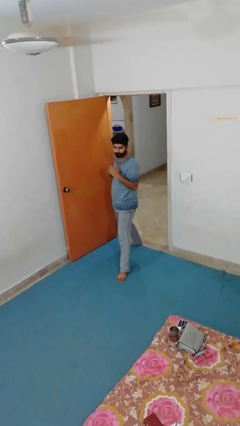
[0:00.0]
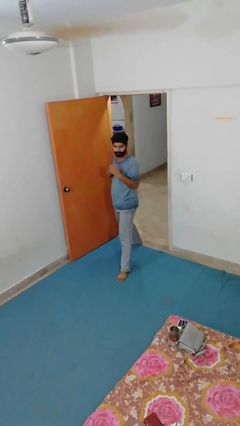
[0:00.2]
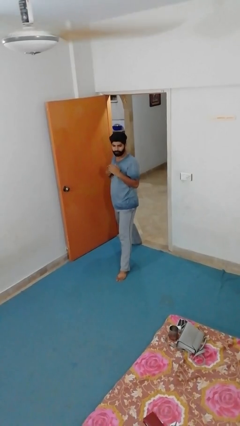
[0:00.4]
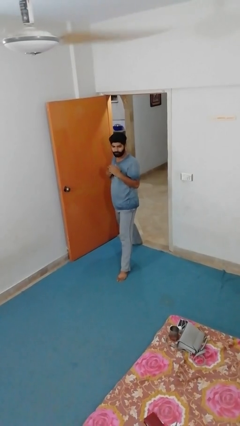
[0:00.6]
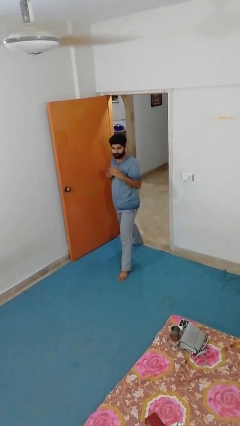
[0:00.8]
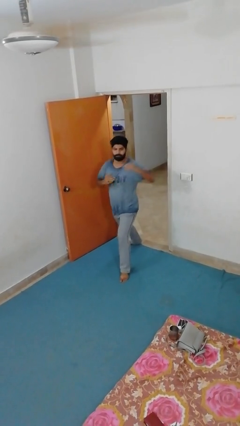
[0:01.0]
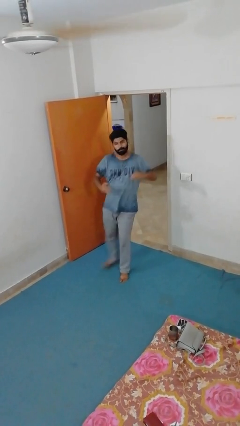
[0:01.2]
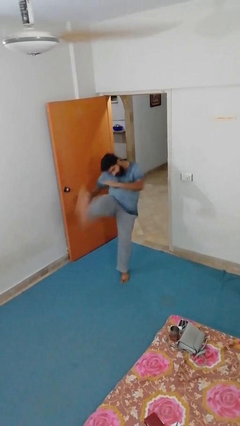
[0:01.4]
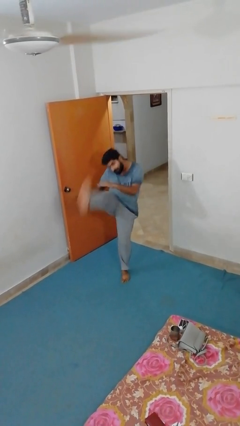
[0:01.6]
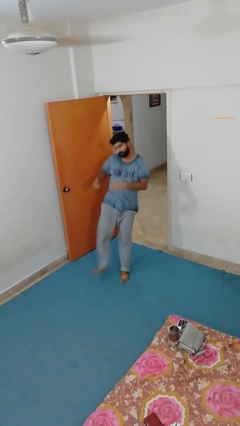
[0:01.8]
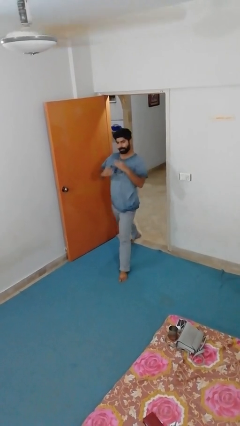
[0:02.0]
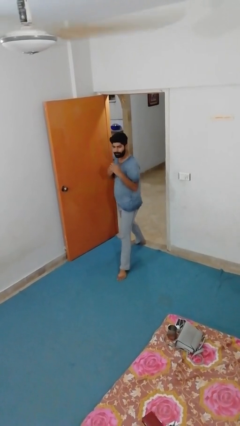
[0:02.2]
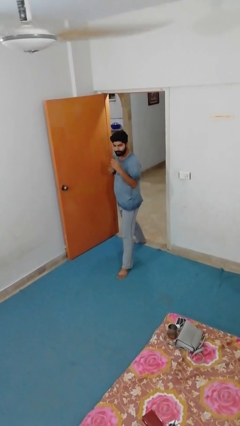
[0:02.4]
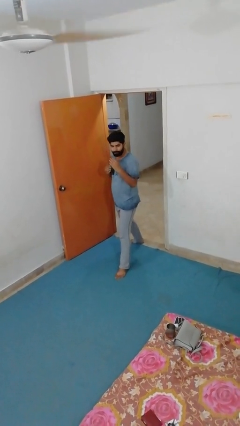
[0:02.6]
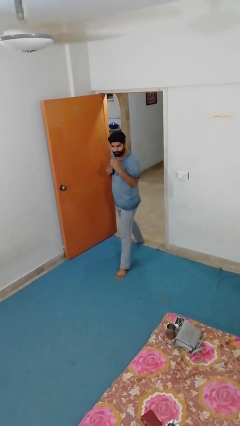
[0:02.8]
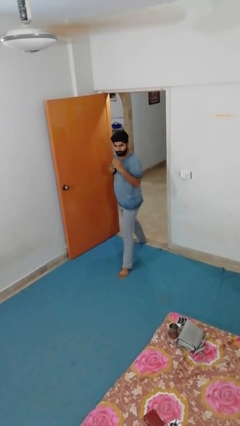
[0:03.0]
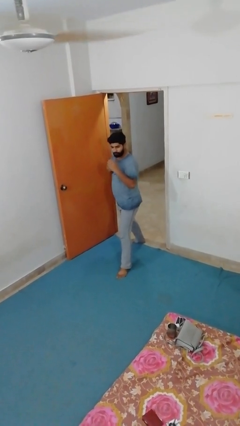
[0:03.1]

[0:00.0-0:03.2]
person karate kicks

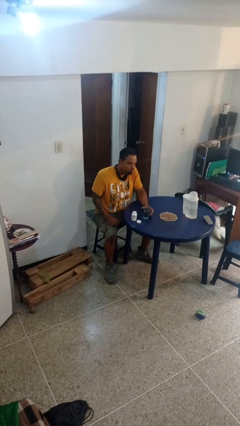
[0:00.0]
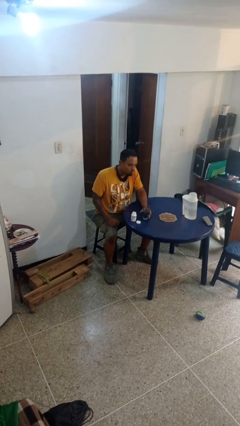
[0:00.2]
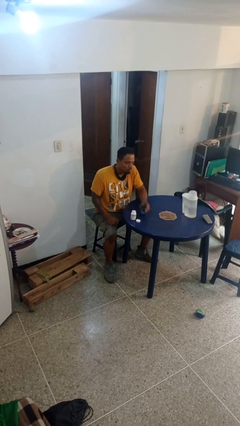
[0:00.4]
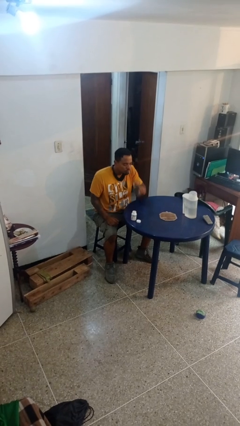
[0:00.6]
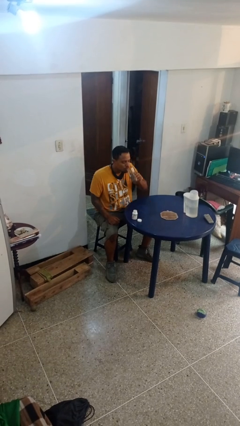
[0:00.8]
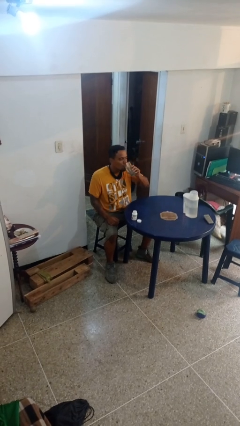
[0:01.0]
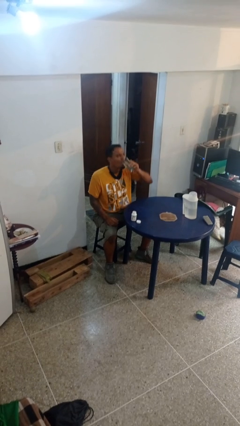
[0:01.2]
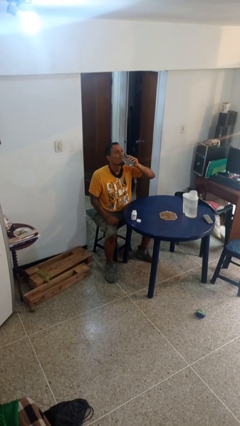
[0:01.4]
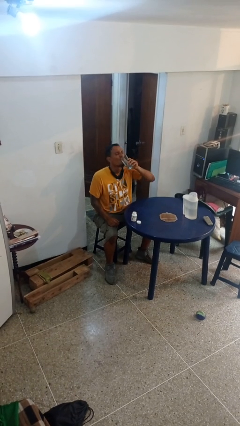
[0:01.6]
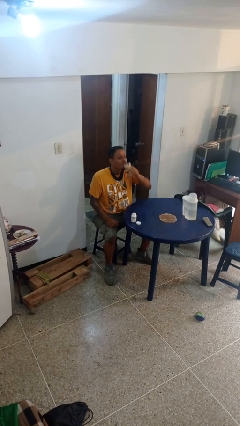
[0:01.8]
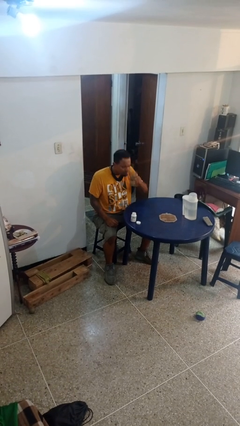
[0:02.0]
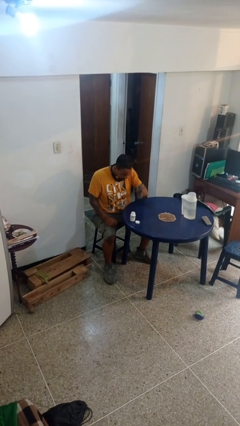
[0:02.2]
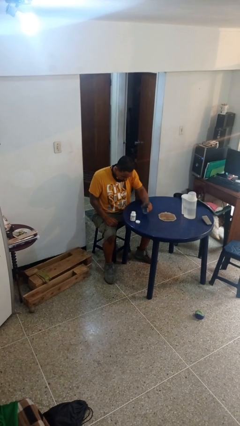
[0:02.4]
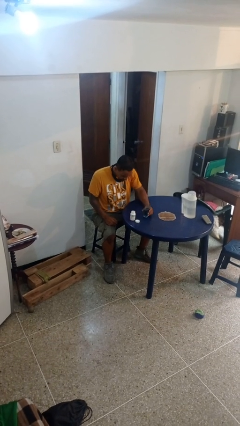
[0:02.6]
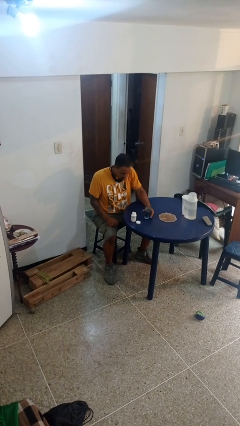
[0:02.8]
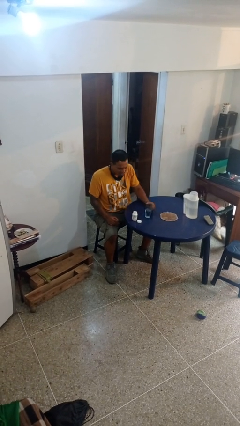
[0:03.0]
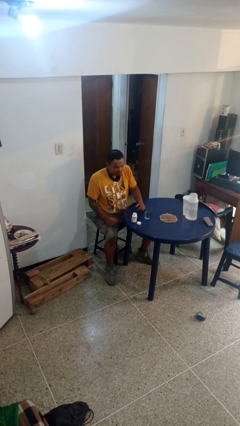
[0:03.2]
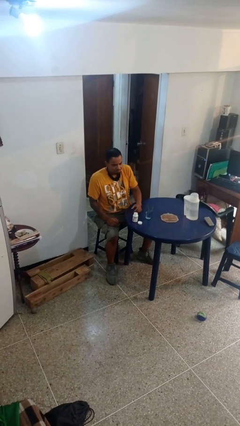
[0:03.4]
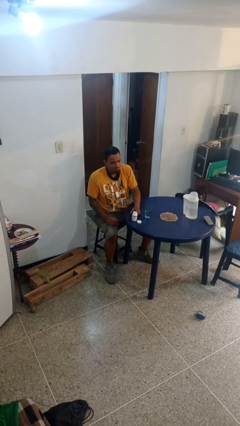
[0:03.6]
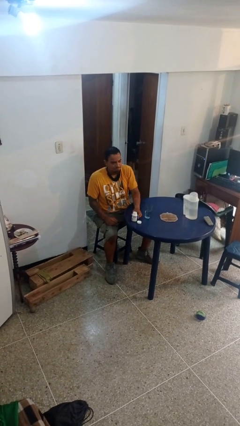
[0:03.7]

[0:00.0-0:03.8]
person drinks from cup

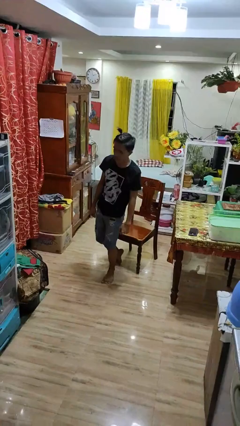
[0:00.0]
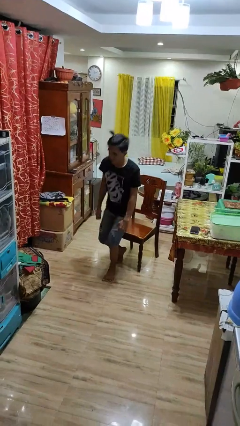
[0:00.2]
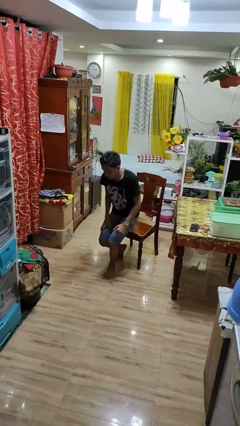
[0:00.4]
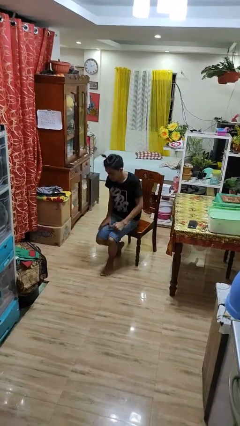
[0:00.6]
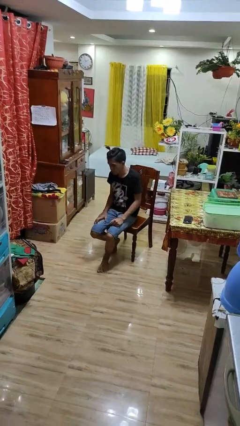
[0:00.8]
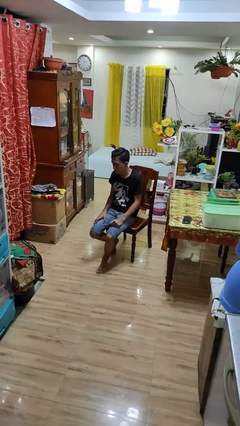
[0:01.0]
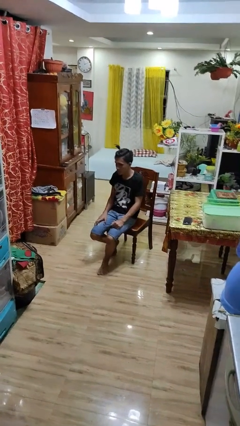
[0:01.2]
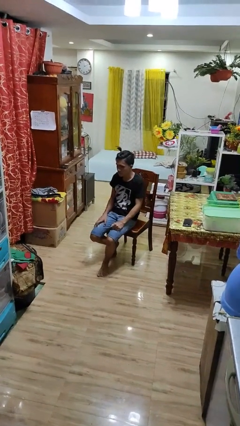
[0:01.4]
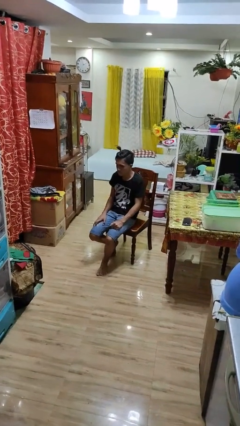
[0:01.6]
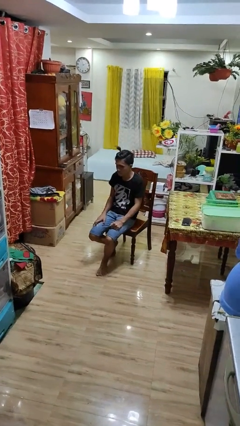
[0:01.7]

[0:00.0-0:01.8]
person sits down

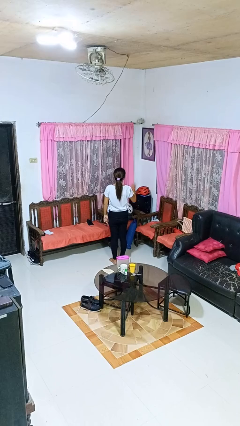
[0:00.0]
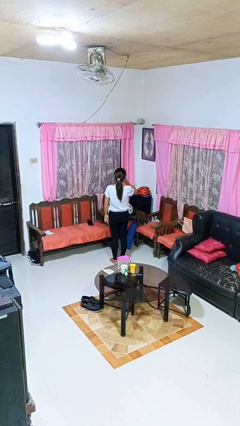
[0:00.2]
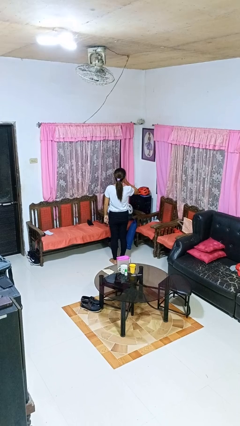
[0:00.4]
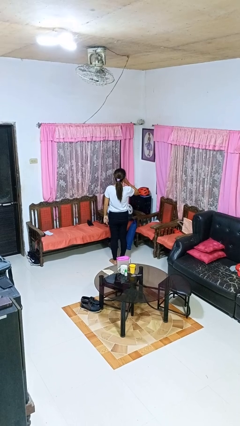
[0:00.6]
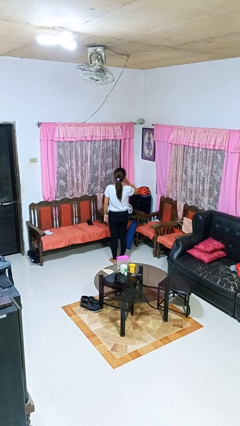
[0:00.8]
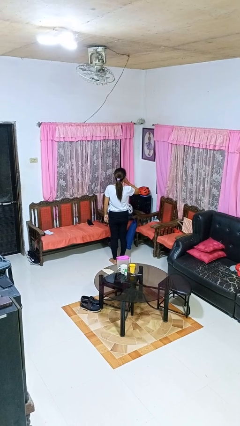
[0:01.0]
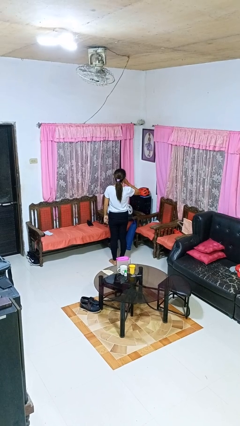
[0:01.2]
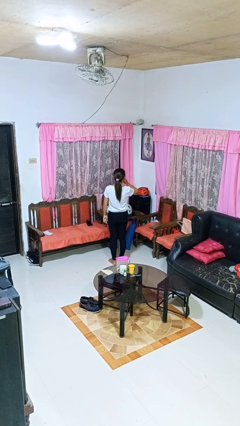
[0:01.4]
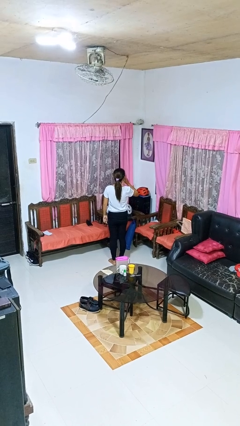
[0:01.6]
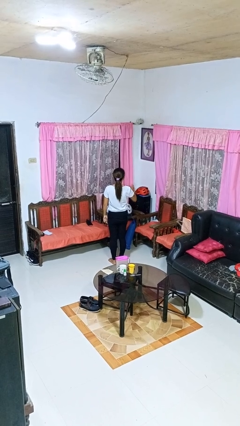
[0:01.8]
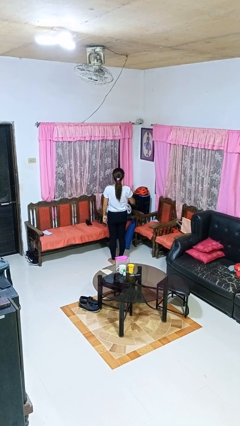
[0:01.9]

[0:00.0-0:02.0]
person gestures be quiet

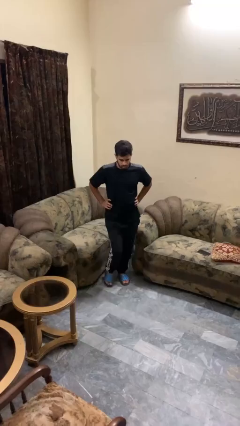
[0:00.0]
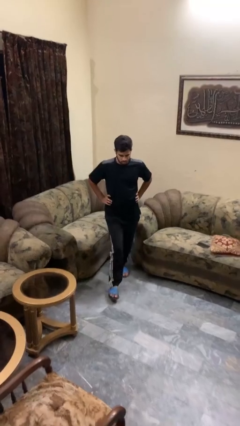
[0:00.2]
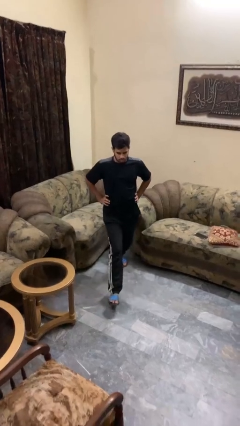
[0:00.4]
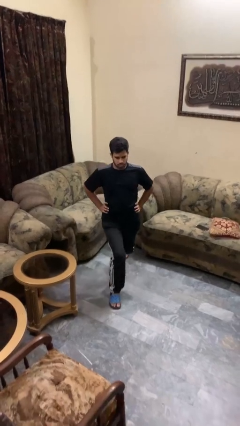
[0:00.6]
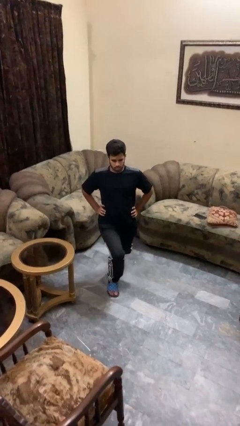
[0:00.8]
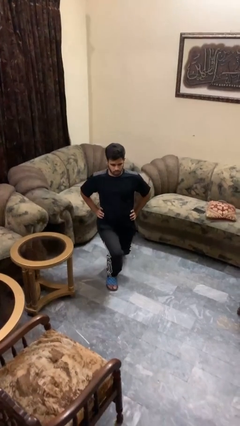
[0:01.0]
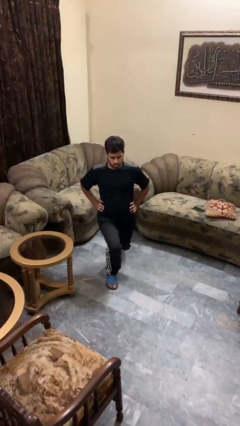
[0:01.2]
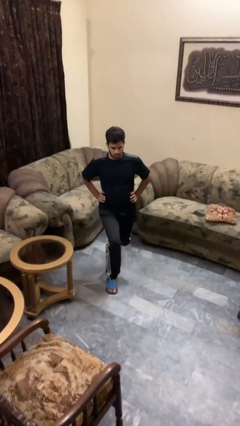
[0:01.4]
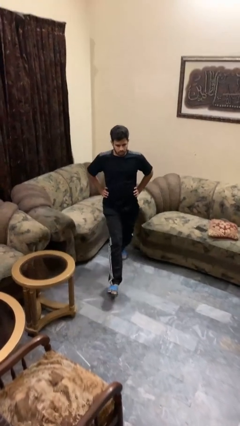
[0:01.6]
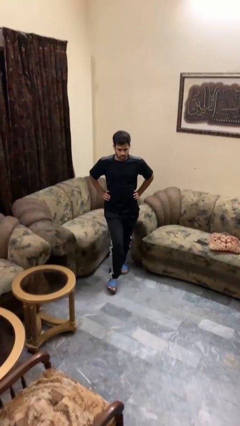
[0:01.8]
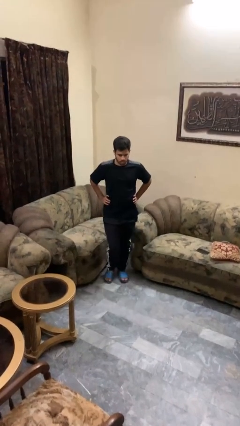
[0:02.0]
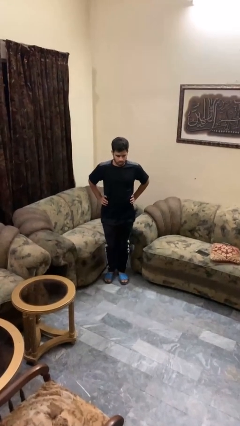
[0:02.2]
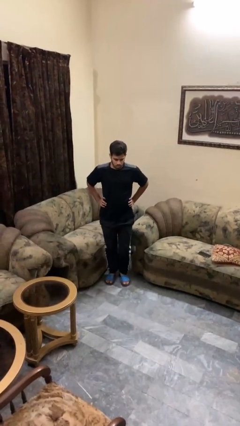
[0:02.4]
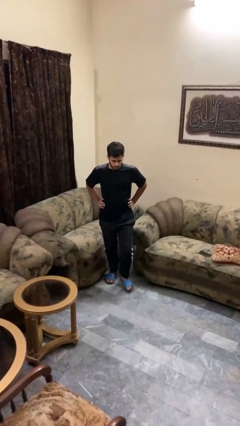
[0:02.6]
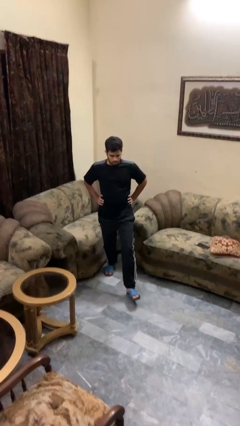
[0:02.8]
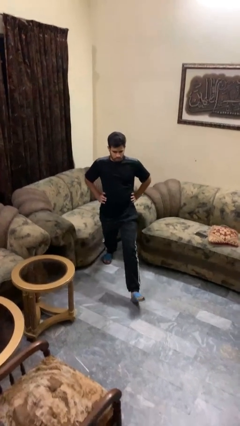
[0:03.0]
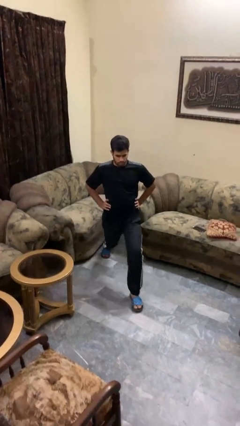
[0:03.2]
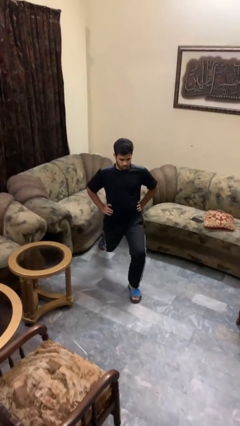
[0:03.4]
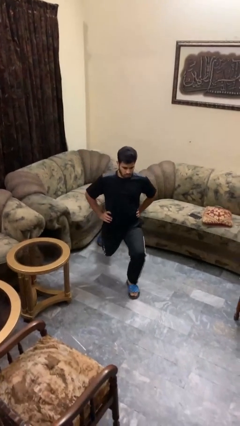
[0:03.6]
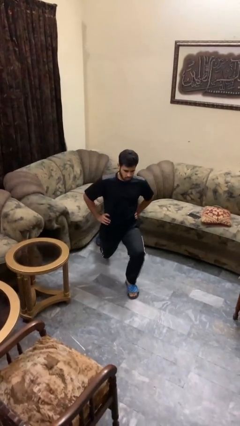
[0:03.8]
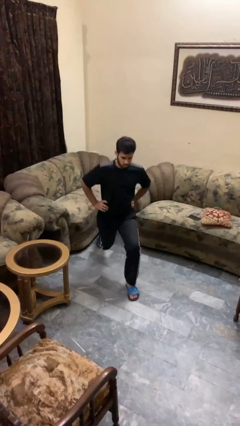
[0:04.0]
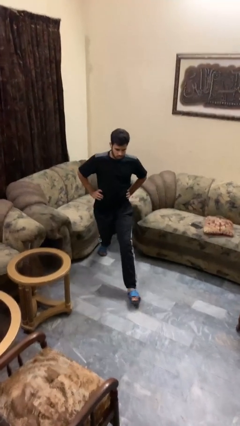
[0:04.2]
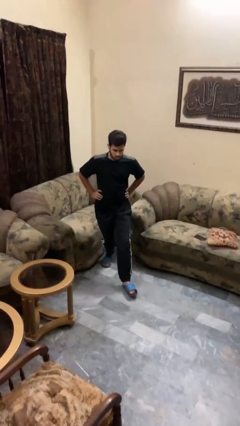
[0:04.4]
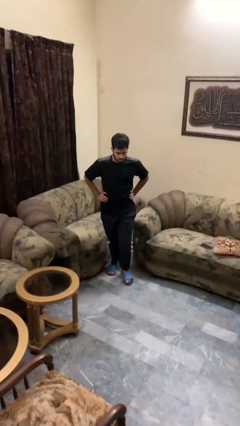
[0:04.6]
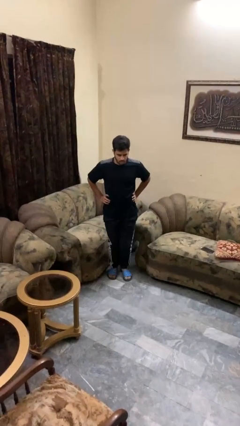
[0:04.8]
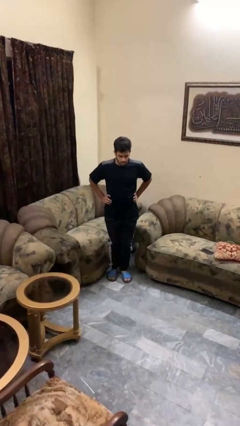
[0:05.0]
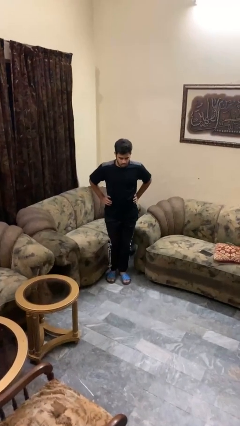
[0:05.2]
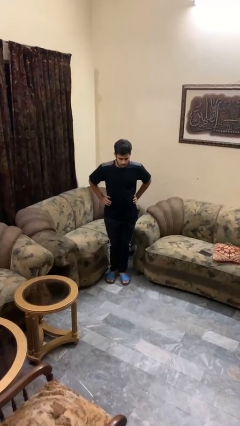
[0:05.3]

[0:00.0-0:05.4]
person exercises with lunges

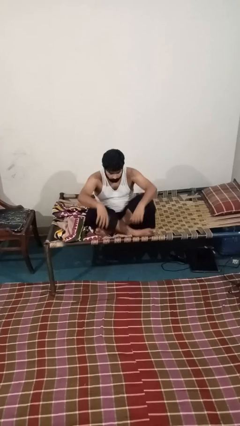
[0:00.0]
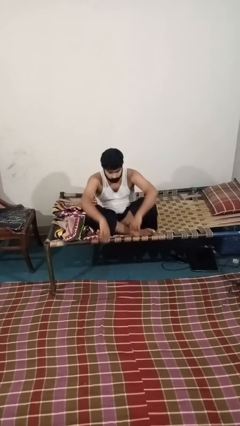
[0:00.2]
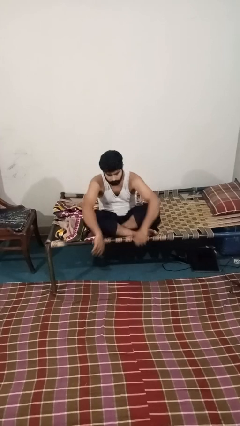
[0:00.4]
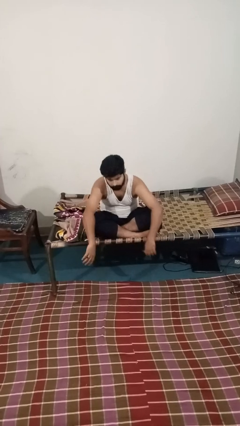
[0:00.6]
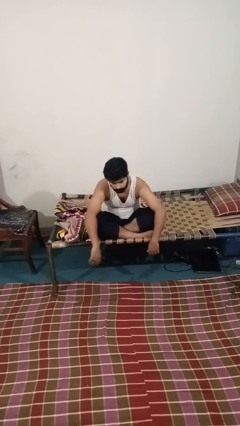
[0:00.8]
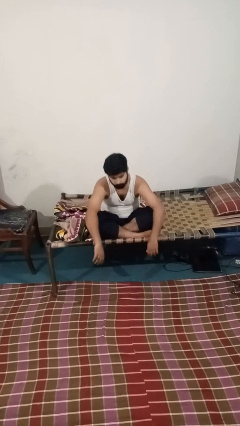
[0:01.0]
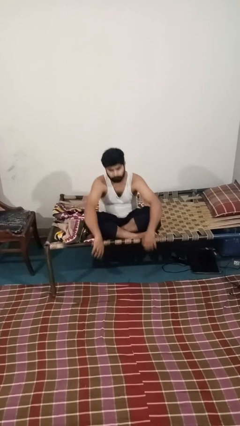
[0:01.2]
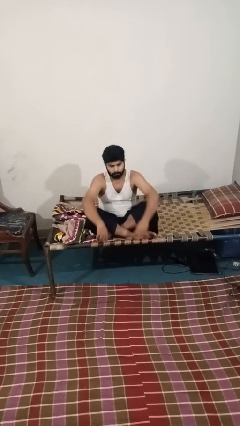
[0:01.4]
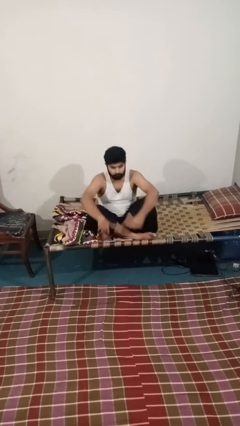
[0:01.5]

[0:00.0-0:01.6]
person crosses legs
